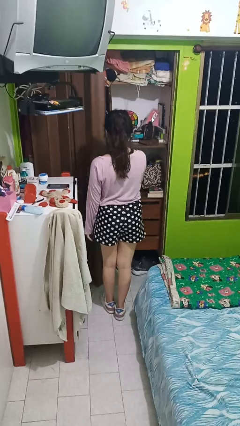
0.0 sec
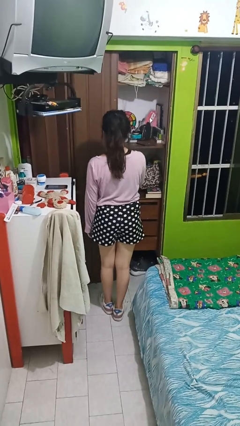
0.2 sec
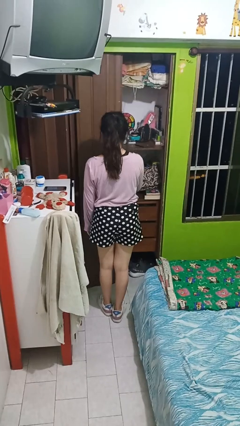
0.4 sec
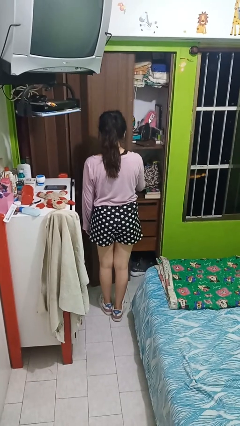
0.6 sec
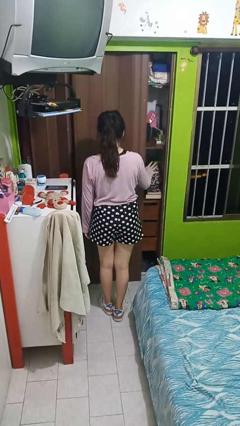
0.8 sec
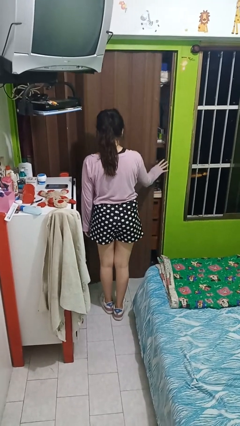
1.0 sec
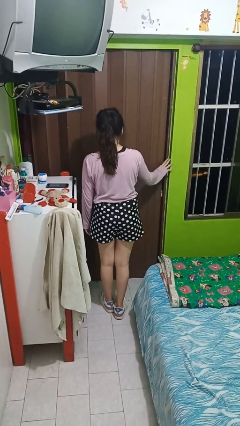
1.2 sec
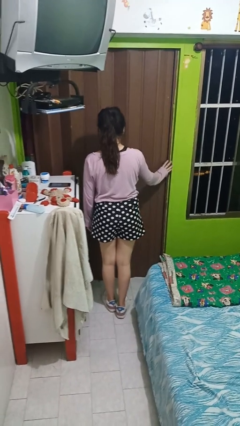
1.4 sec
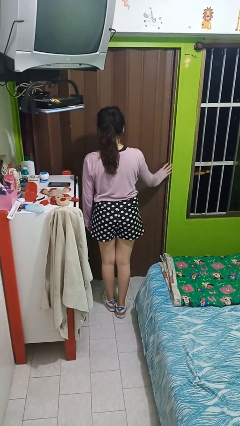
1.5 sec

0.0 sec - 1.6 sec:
person closes sliding door

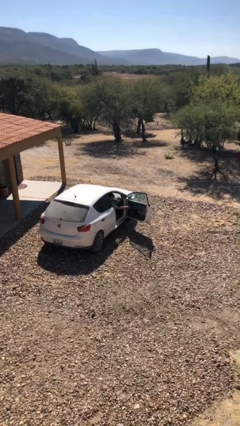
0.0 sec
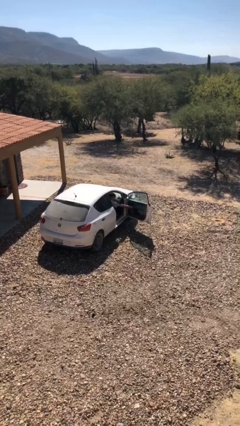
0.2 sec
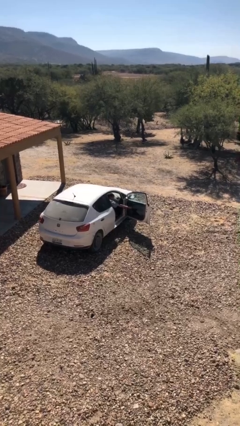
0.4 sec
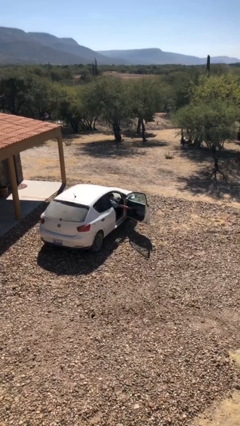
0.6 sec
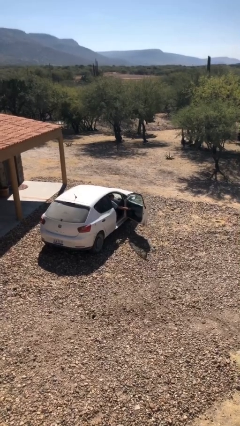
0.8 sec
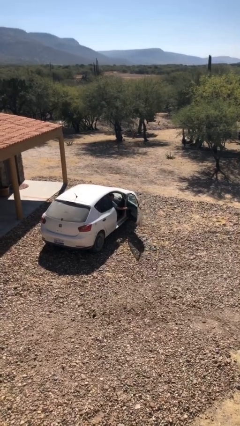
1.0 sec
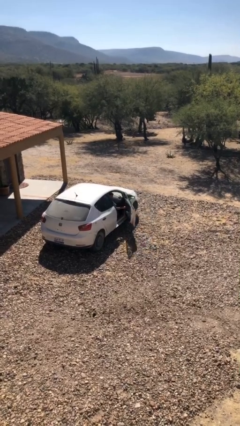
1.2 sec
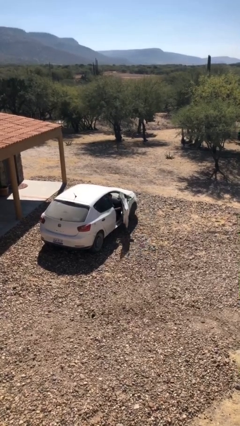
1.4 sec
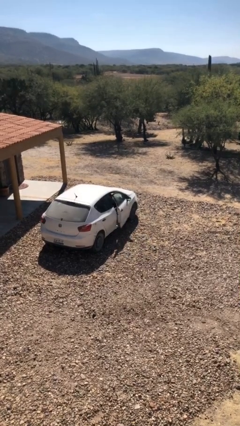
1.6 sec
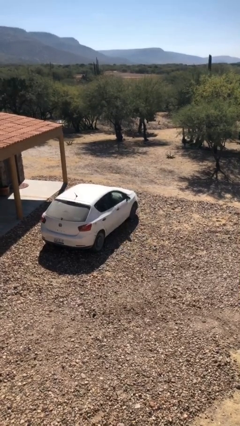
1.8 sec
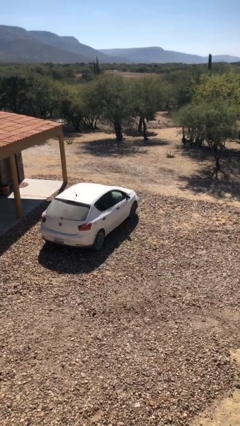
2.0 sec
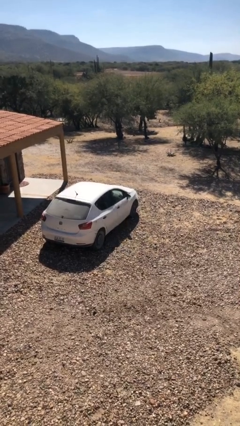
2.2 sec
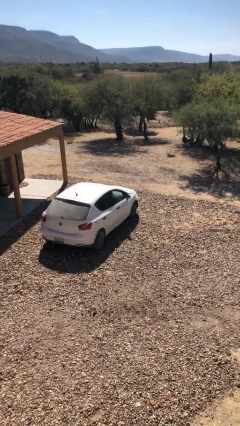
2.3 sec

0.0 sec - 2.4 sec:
person closes car door

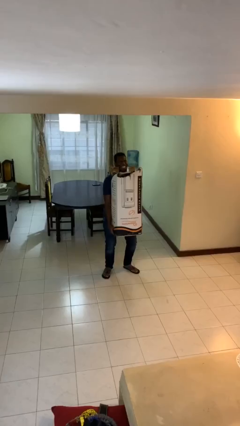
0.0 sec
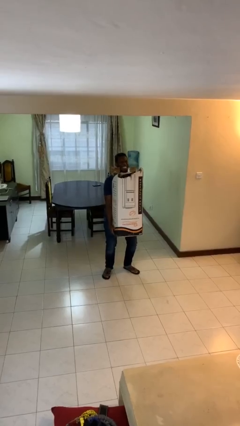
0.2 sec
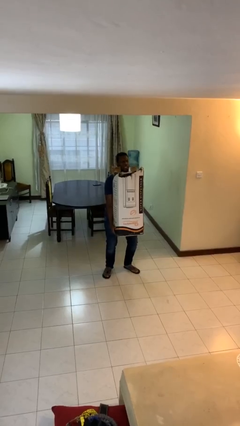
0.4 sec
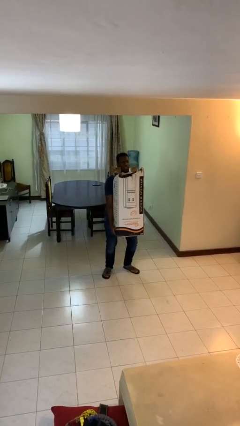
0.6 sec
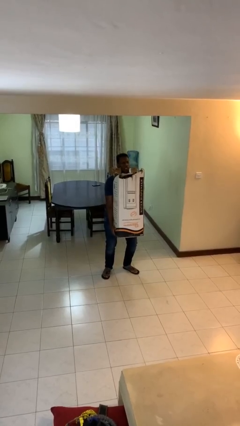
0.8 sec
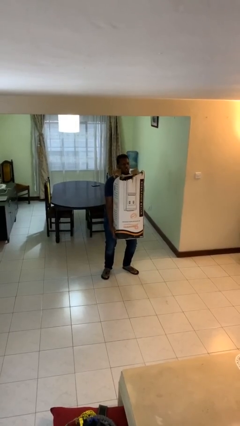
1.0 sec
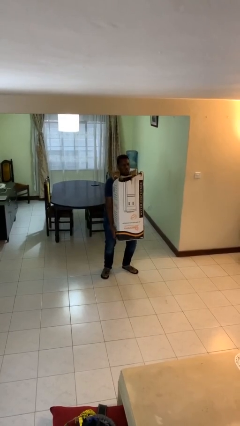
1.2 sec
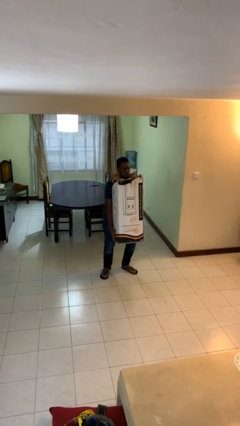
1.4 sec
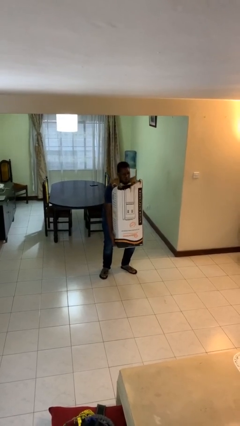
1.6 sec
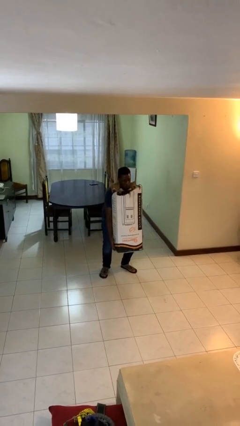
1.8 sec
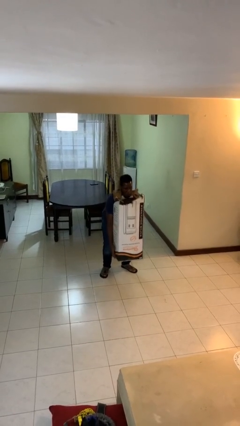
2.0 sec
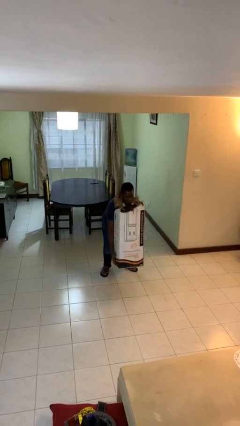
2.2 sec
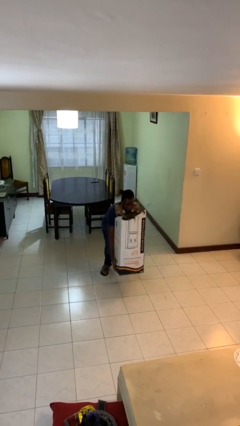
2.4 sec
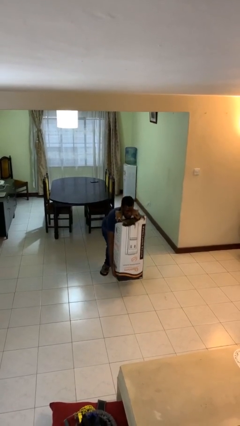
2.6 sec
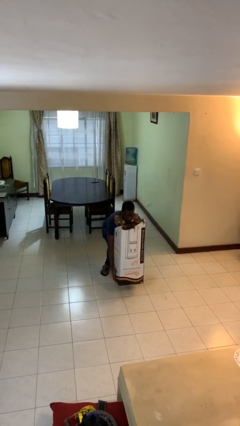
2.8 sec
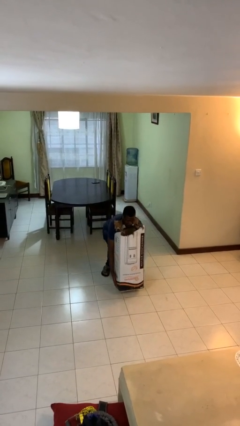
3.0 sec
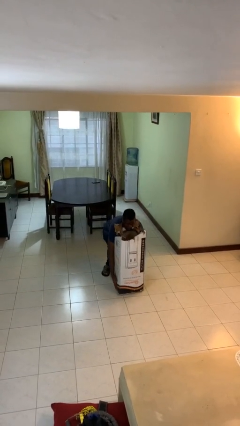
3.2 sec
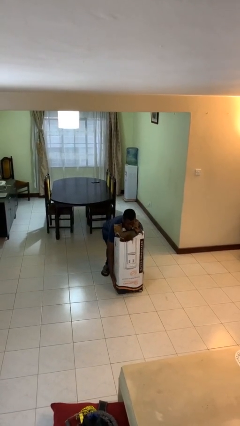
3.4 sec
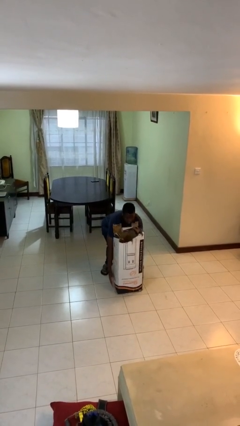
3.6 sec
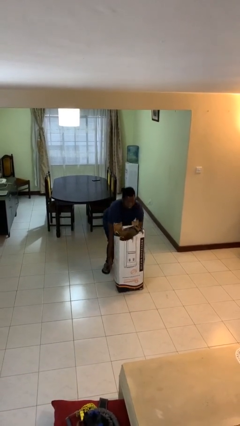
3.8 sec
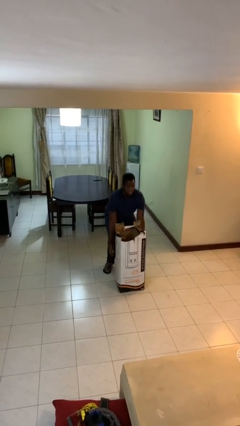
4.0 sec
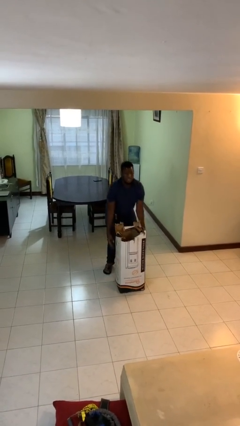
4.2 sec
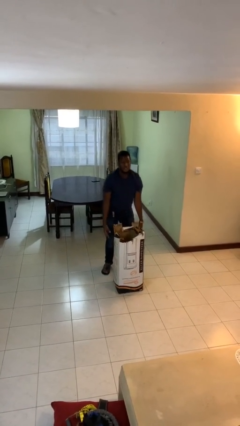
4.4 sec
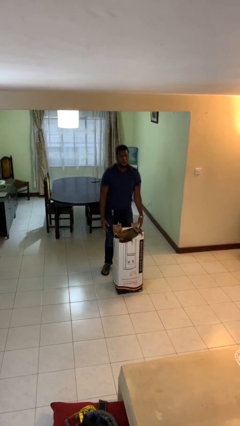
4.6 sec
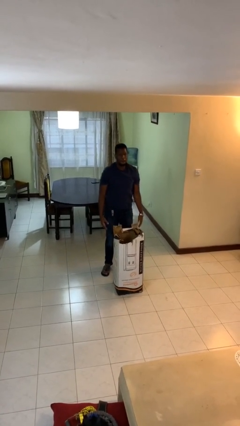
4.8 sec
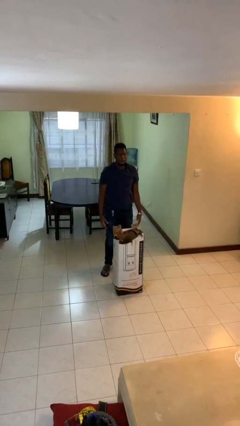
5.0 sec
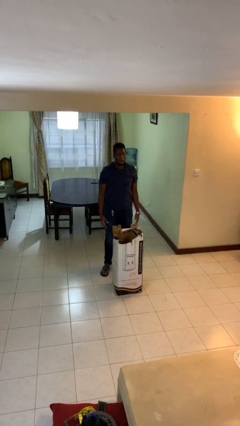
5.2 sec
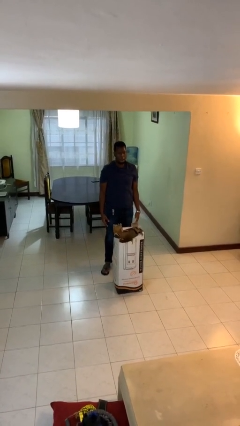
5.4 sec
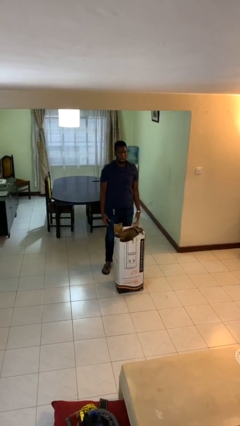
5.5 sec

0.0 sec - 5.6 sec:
person puts down object on floor

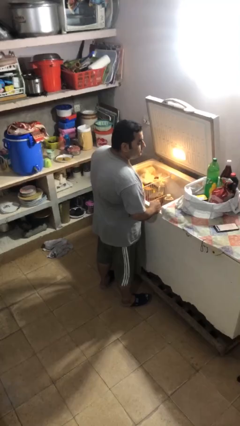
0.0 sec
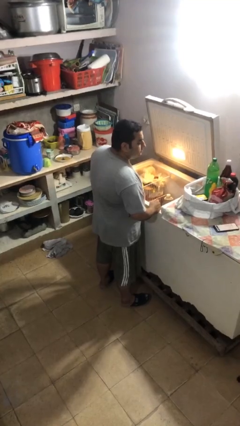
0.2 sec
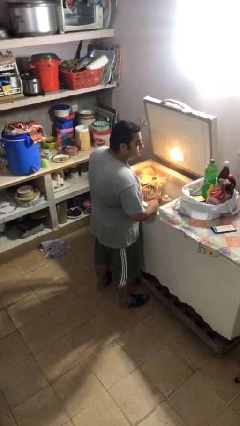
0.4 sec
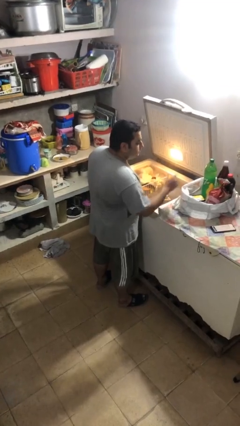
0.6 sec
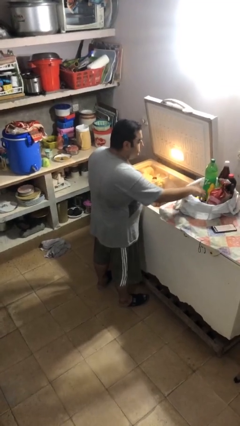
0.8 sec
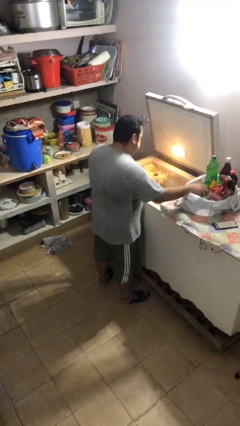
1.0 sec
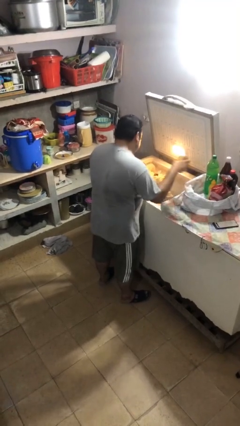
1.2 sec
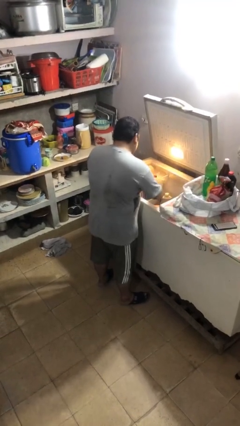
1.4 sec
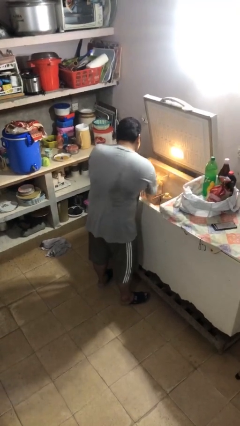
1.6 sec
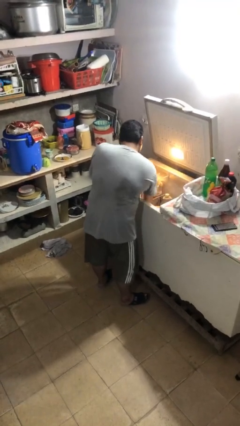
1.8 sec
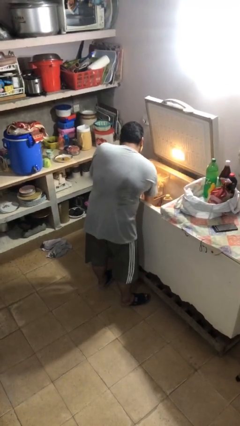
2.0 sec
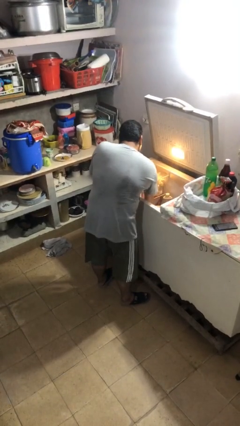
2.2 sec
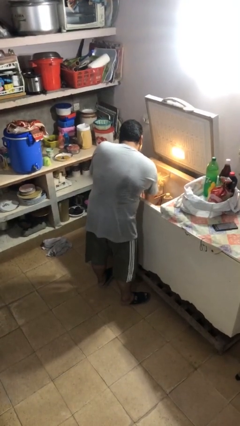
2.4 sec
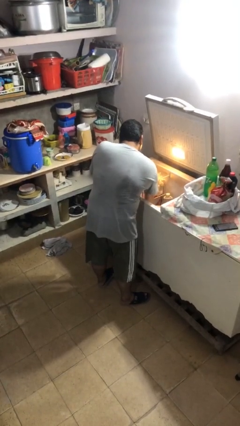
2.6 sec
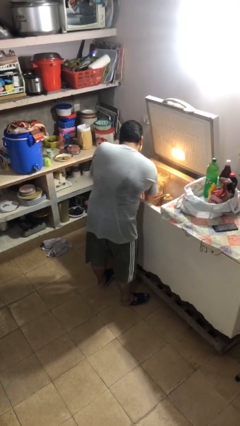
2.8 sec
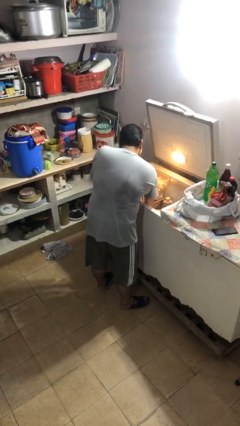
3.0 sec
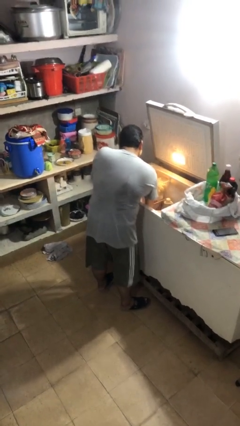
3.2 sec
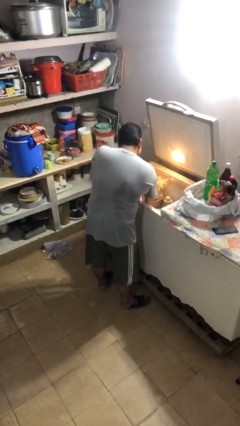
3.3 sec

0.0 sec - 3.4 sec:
person loads groceries into refrigerator

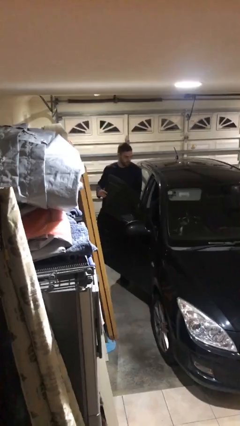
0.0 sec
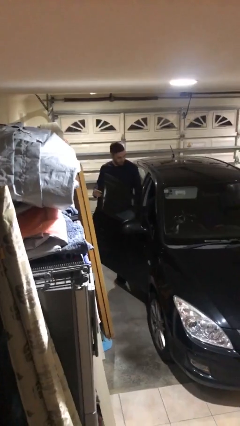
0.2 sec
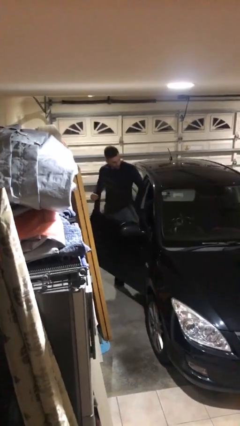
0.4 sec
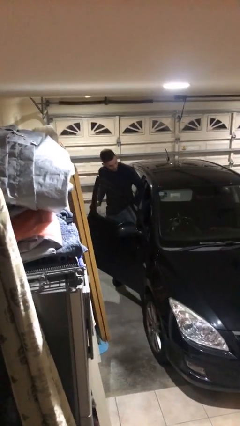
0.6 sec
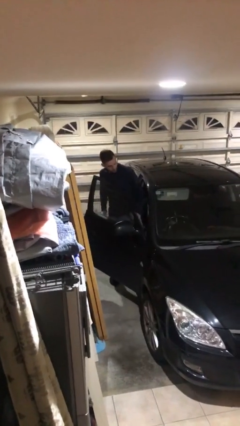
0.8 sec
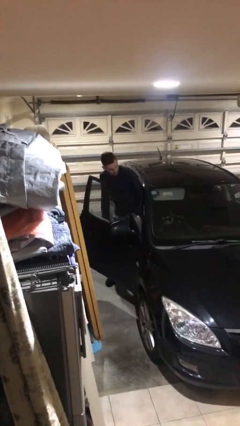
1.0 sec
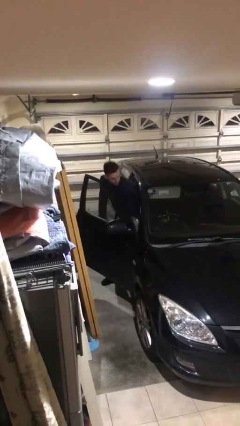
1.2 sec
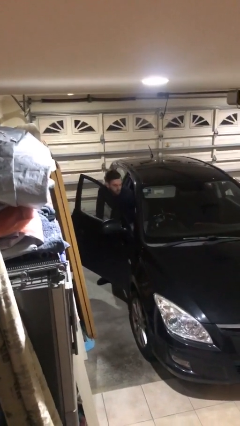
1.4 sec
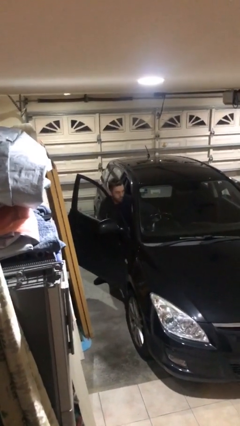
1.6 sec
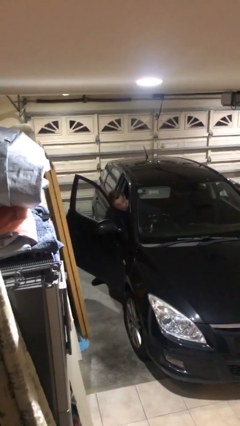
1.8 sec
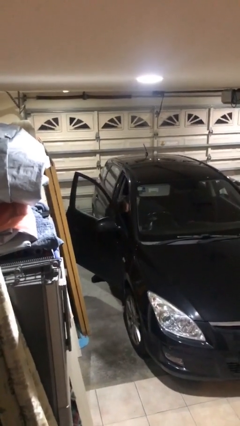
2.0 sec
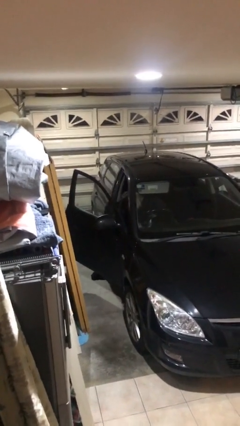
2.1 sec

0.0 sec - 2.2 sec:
person enters car

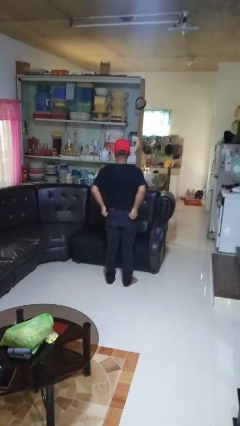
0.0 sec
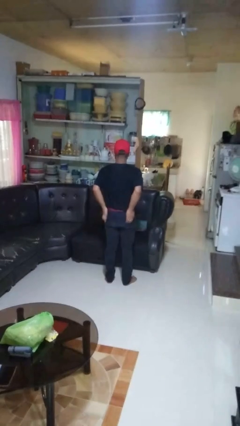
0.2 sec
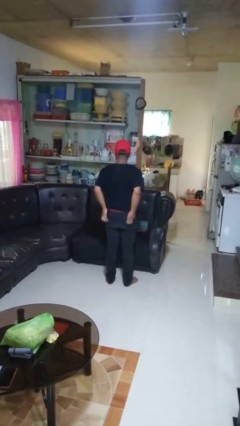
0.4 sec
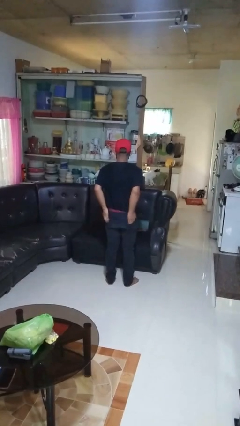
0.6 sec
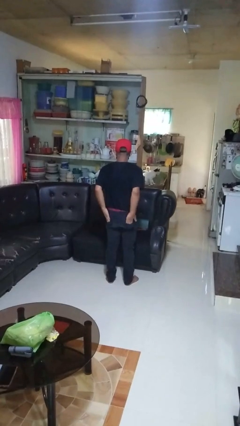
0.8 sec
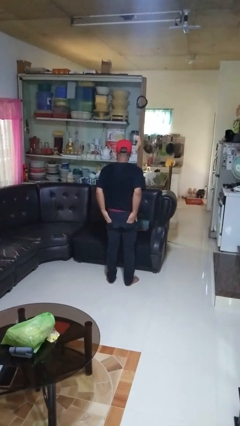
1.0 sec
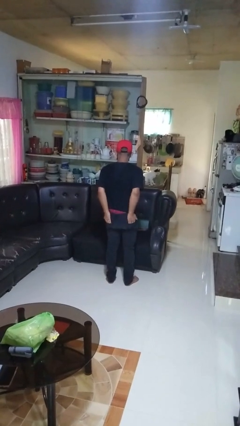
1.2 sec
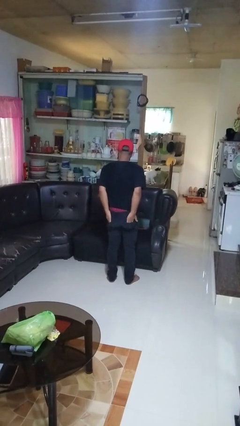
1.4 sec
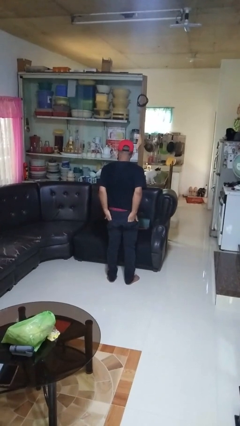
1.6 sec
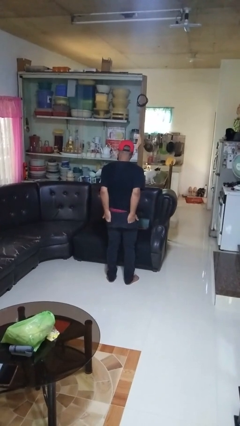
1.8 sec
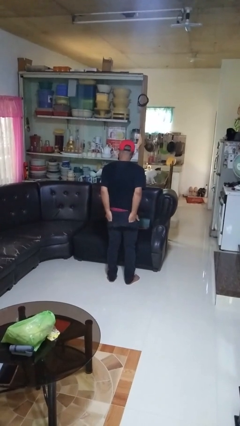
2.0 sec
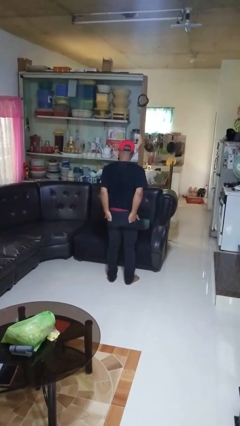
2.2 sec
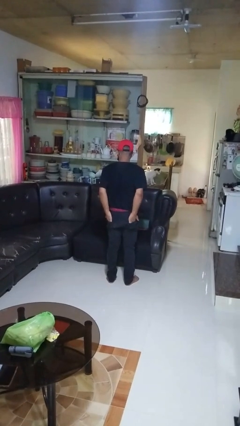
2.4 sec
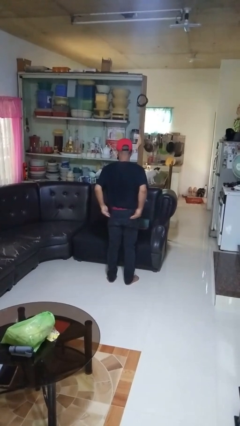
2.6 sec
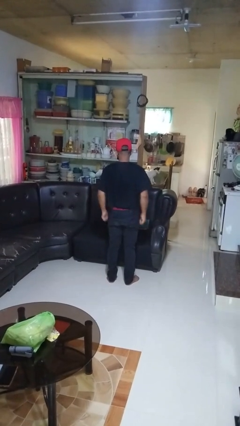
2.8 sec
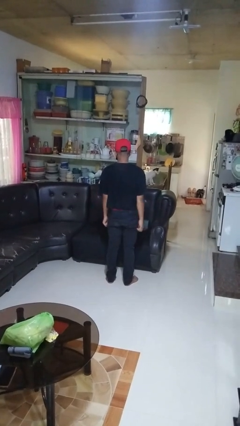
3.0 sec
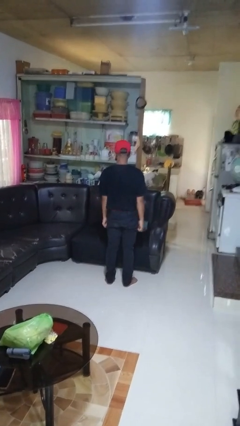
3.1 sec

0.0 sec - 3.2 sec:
person puts hands in back pockets
